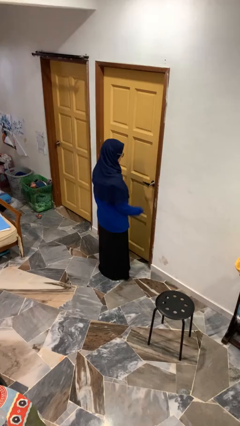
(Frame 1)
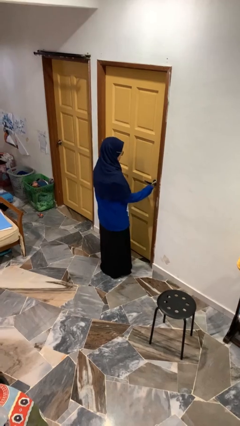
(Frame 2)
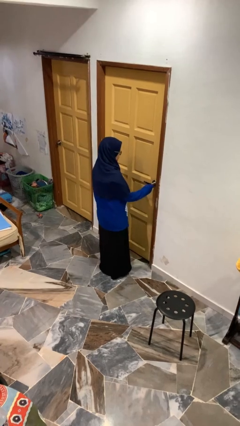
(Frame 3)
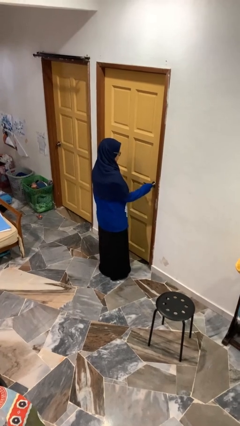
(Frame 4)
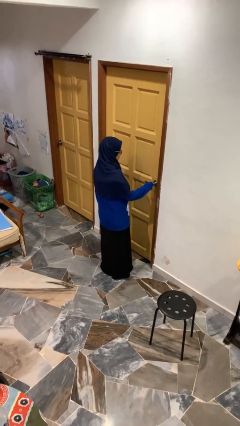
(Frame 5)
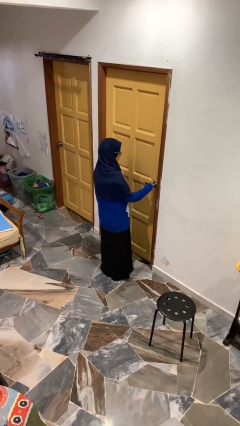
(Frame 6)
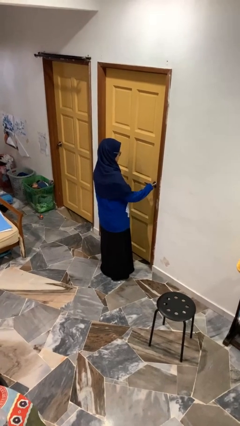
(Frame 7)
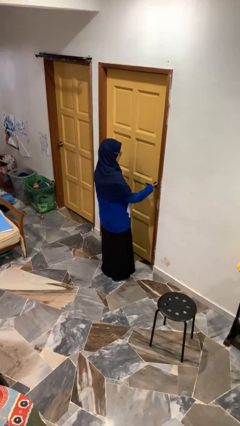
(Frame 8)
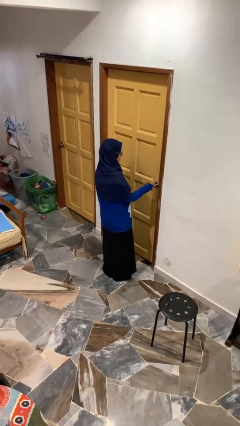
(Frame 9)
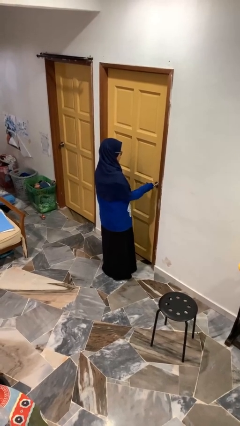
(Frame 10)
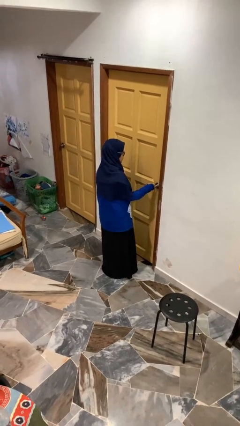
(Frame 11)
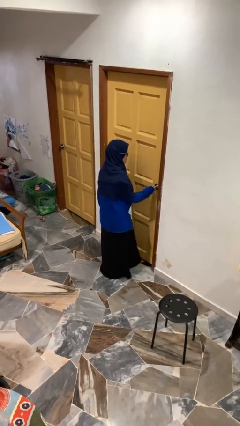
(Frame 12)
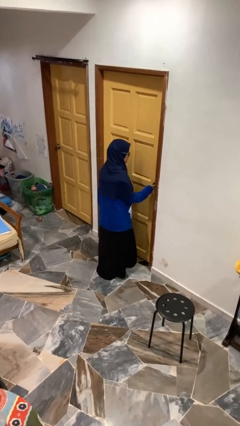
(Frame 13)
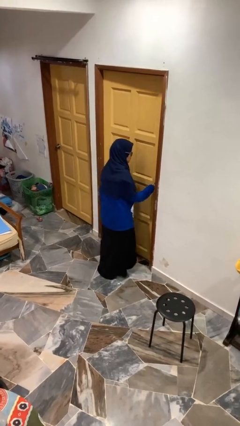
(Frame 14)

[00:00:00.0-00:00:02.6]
person unlocks door with keys

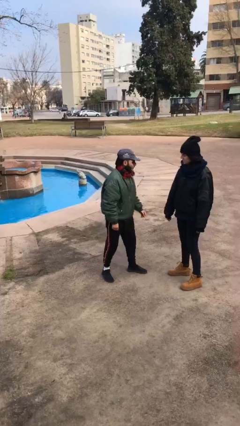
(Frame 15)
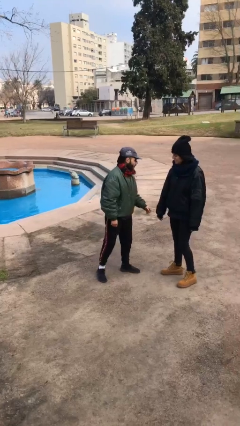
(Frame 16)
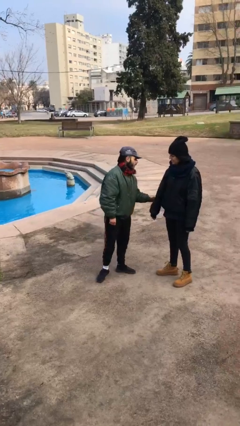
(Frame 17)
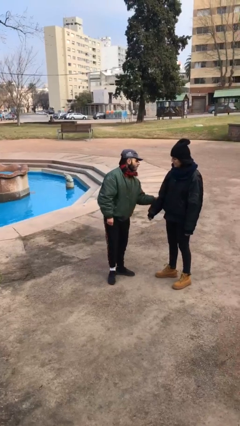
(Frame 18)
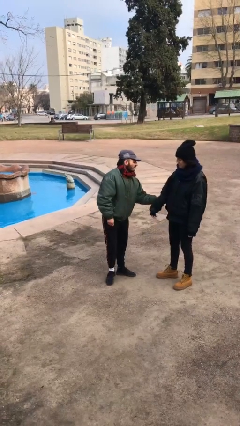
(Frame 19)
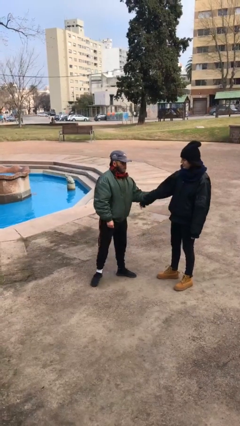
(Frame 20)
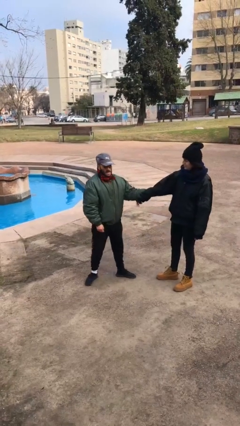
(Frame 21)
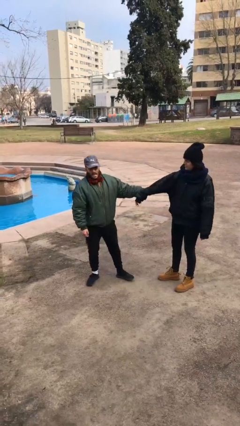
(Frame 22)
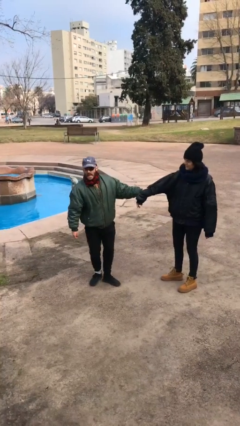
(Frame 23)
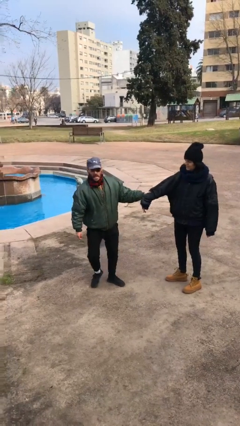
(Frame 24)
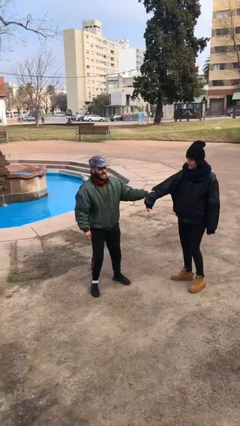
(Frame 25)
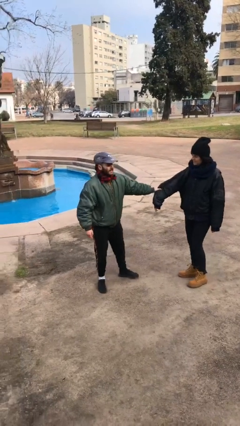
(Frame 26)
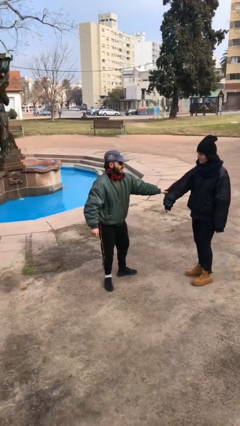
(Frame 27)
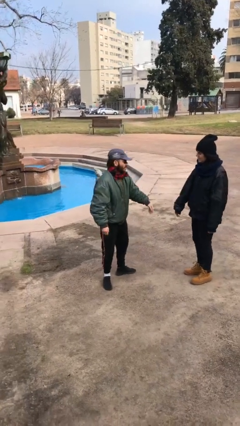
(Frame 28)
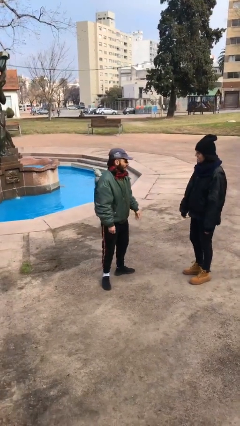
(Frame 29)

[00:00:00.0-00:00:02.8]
person grabs person by forearm

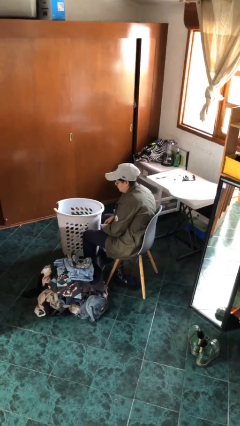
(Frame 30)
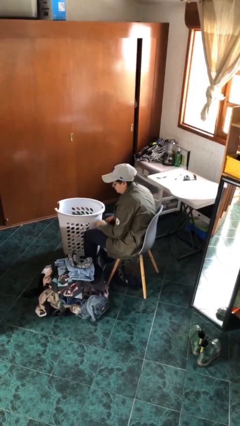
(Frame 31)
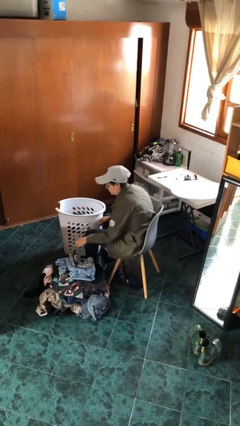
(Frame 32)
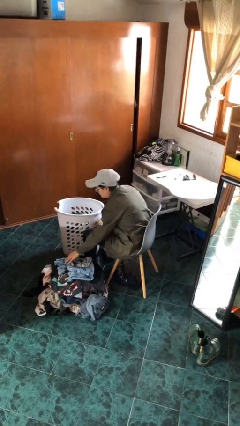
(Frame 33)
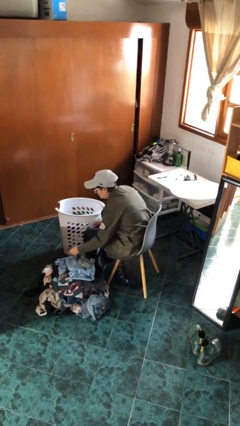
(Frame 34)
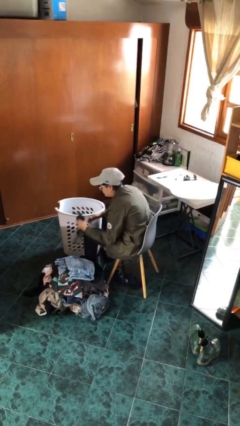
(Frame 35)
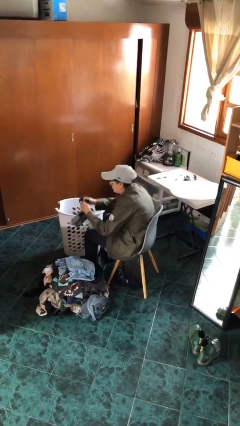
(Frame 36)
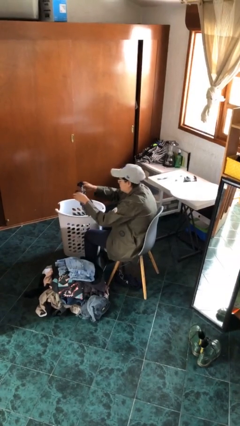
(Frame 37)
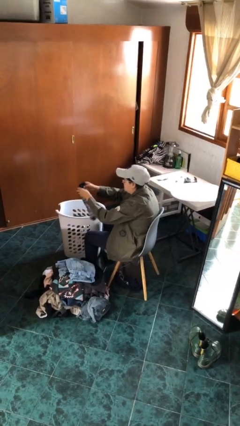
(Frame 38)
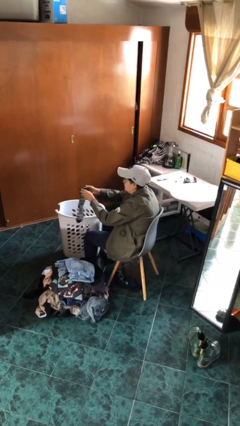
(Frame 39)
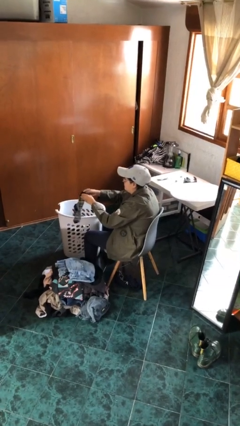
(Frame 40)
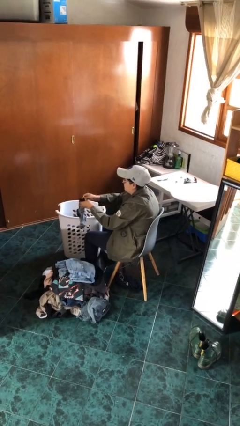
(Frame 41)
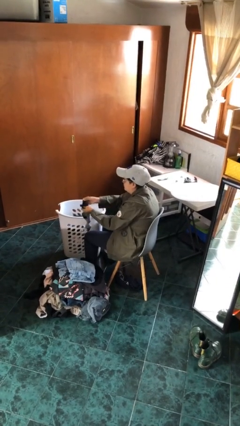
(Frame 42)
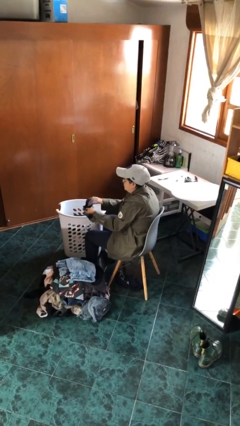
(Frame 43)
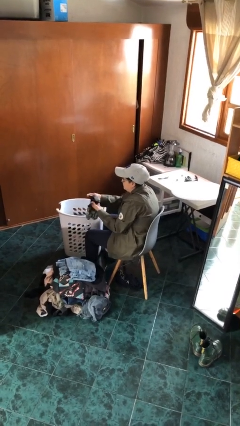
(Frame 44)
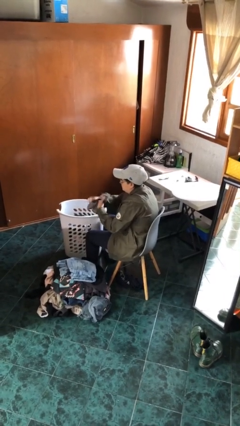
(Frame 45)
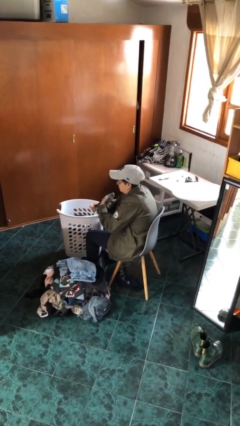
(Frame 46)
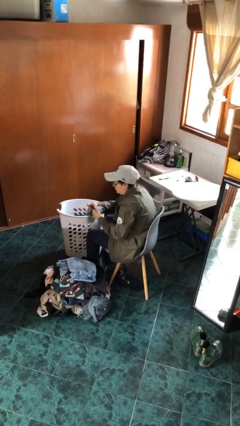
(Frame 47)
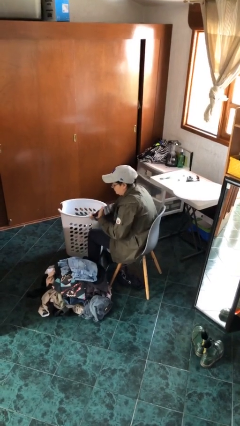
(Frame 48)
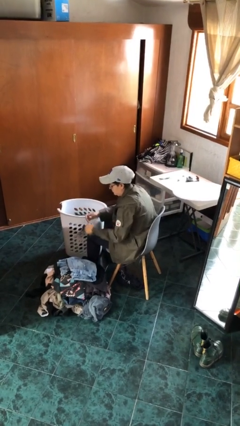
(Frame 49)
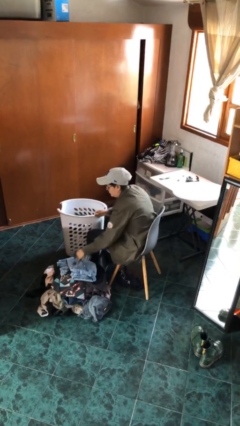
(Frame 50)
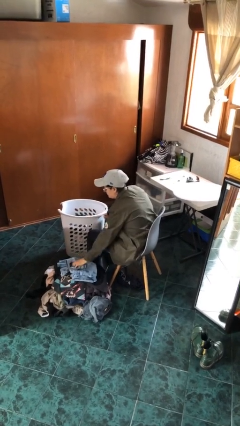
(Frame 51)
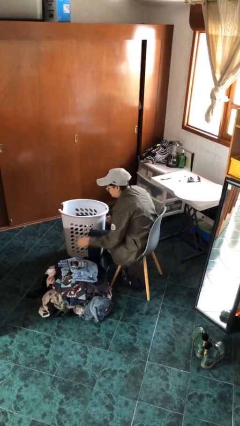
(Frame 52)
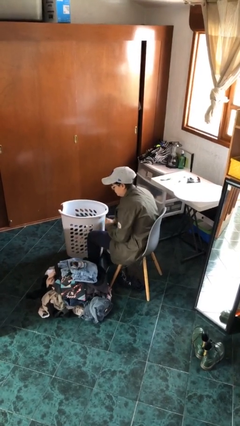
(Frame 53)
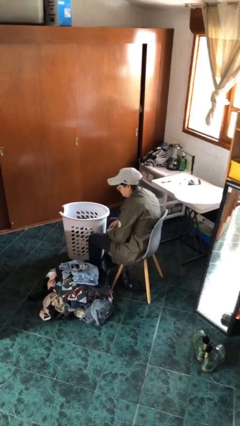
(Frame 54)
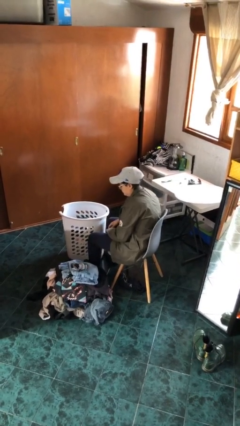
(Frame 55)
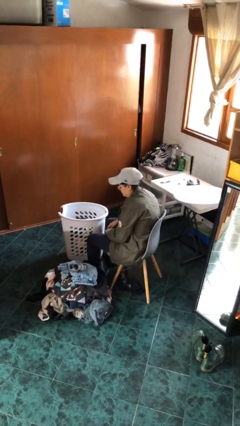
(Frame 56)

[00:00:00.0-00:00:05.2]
person folds socks

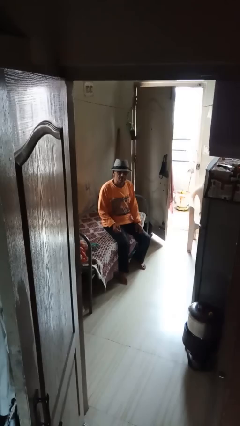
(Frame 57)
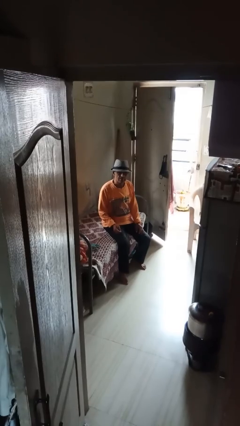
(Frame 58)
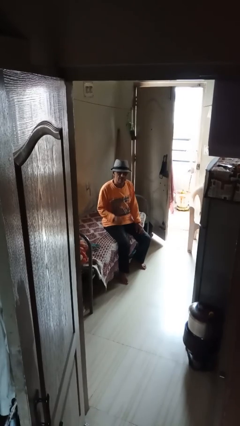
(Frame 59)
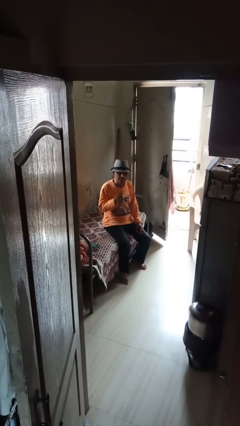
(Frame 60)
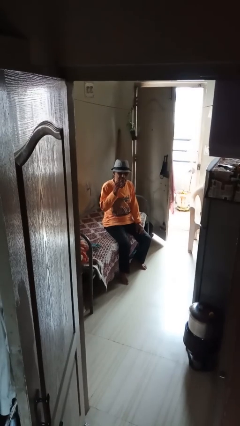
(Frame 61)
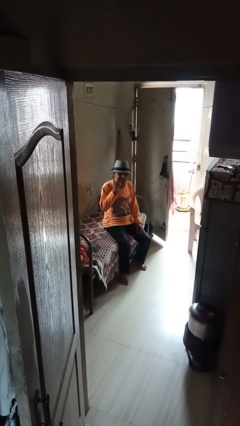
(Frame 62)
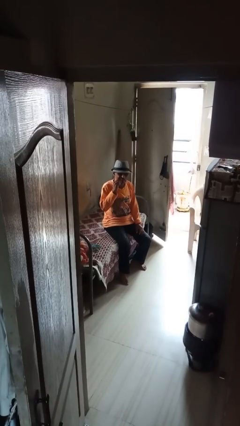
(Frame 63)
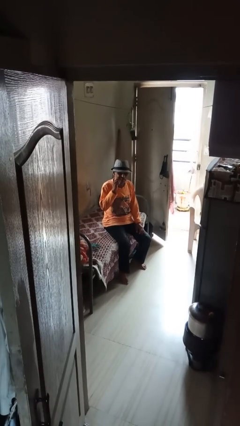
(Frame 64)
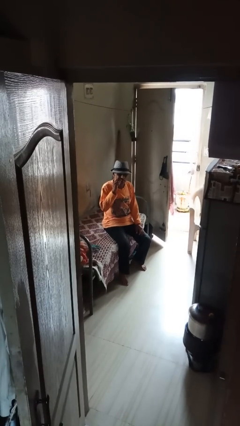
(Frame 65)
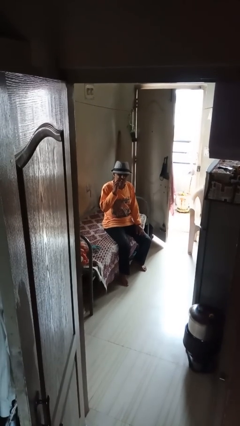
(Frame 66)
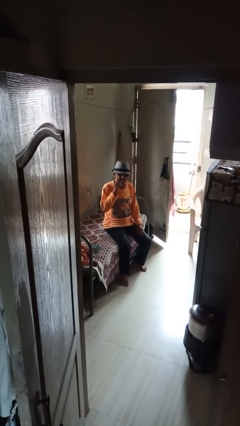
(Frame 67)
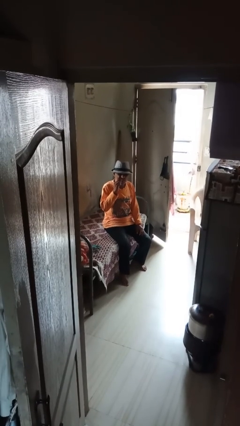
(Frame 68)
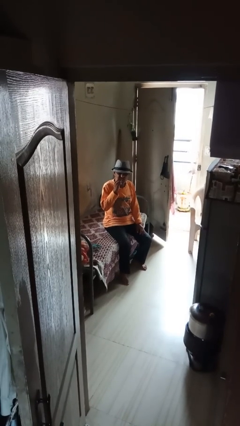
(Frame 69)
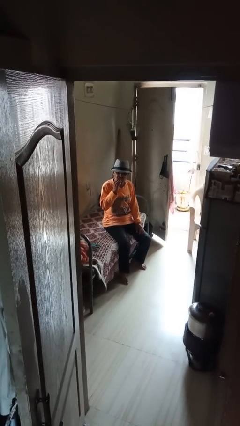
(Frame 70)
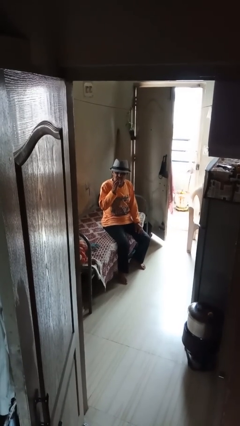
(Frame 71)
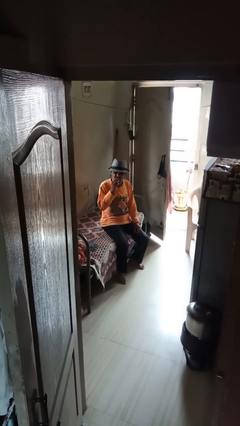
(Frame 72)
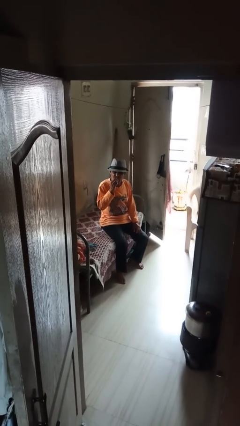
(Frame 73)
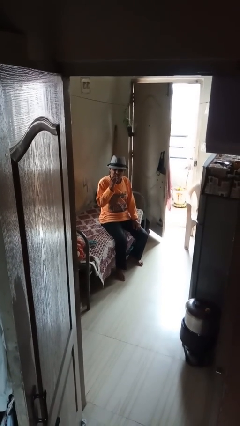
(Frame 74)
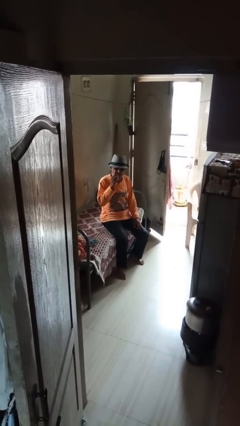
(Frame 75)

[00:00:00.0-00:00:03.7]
person flosses

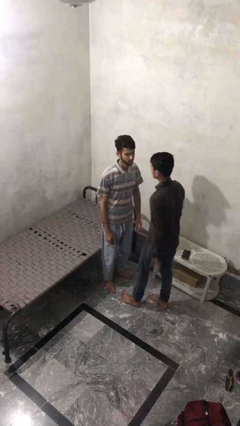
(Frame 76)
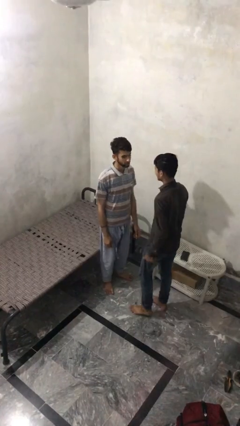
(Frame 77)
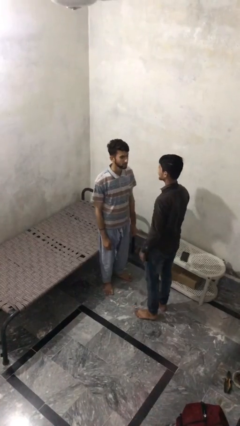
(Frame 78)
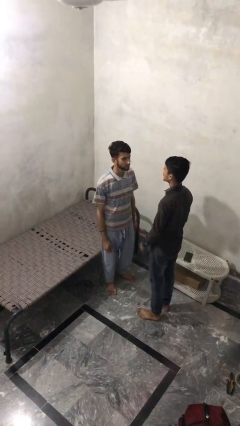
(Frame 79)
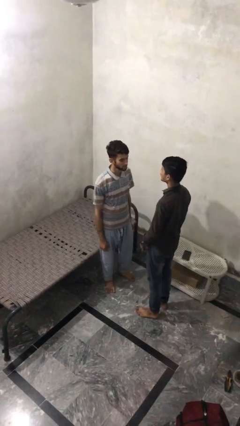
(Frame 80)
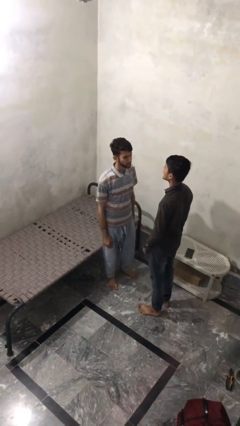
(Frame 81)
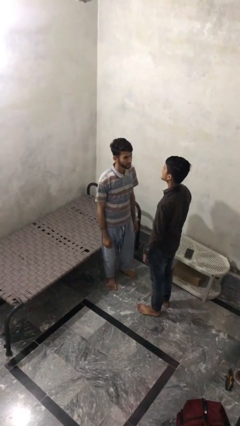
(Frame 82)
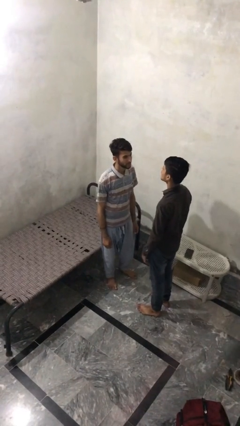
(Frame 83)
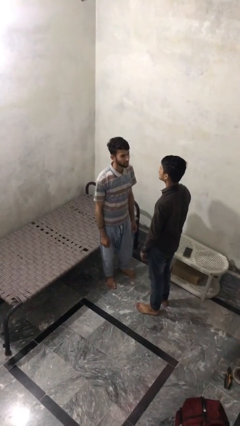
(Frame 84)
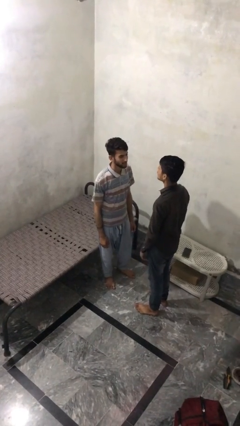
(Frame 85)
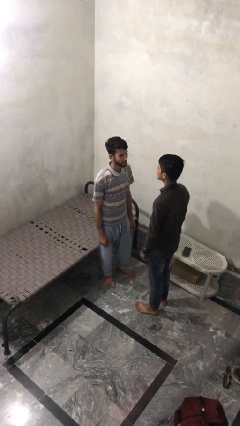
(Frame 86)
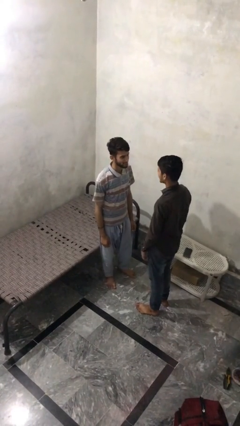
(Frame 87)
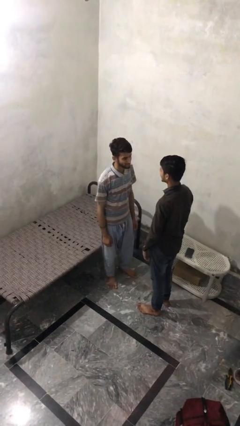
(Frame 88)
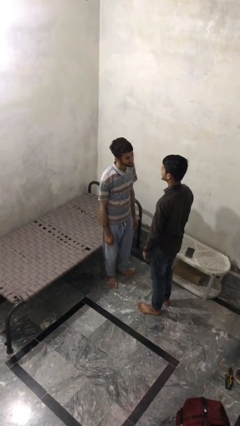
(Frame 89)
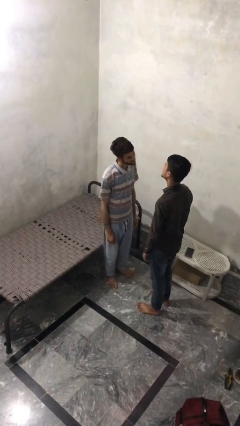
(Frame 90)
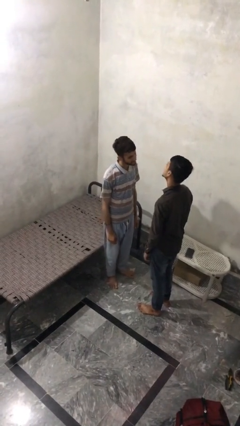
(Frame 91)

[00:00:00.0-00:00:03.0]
person talks to person

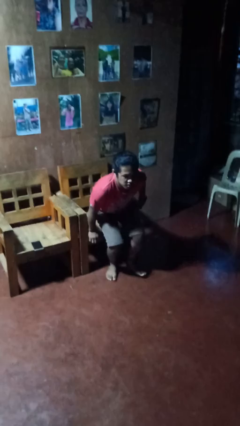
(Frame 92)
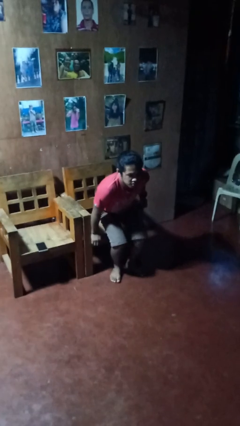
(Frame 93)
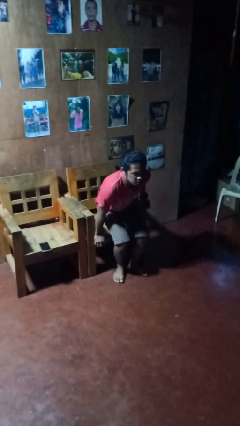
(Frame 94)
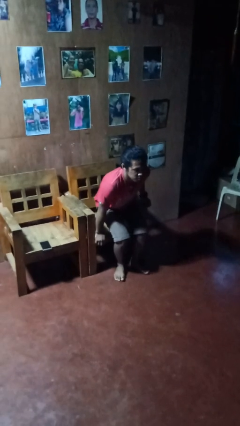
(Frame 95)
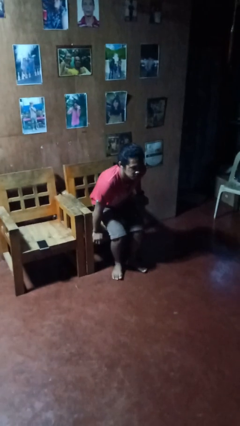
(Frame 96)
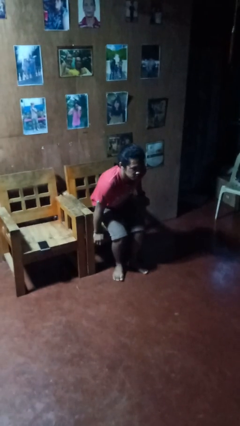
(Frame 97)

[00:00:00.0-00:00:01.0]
person stands up from floor
